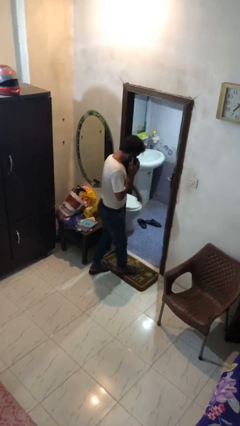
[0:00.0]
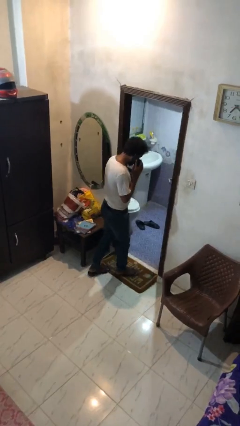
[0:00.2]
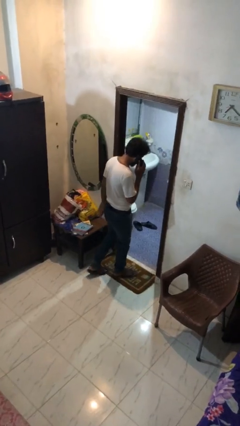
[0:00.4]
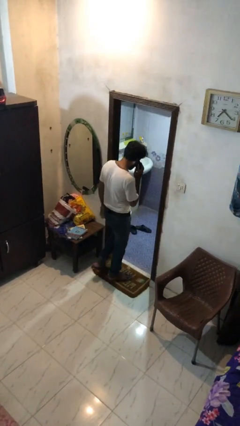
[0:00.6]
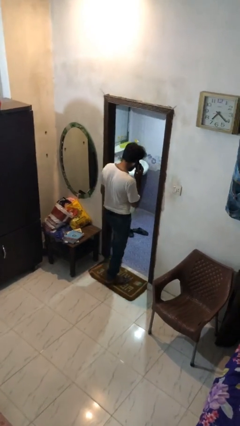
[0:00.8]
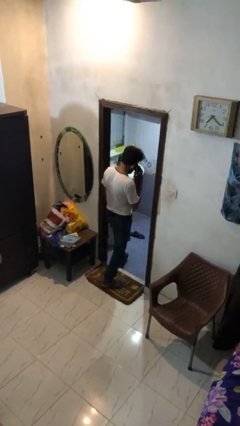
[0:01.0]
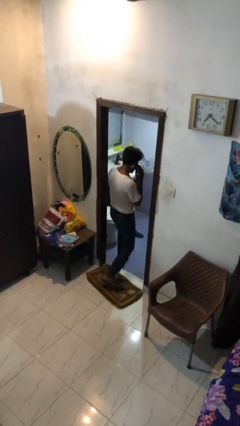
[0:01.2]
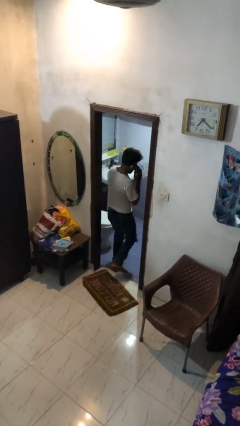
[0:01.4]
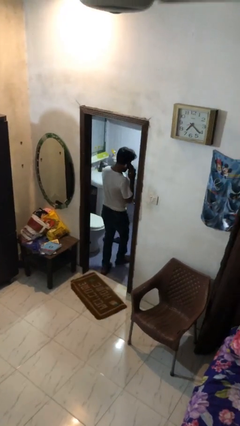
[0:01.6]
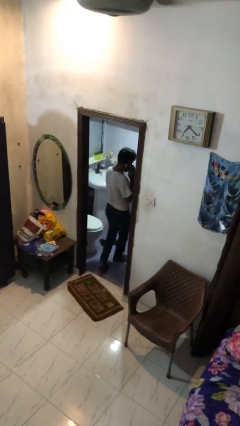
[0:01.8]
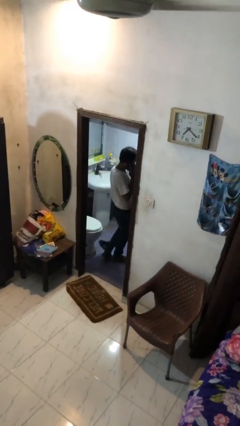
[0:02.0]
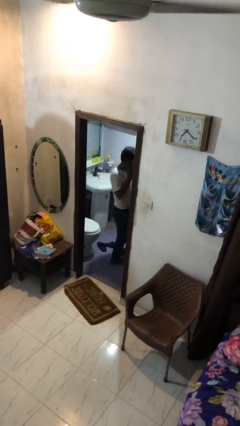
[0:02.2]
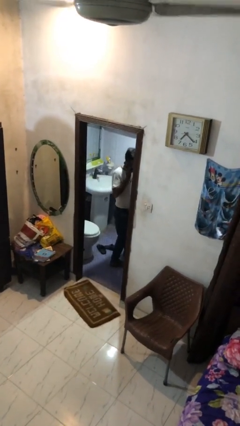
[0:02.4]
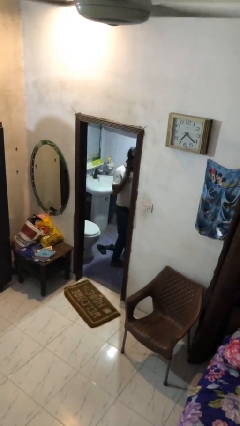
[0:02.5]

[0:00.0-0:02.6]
person exits scene through structure

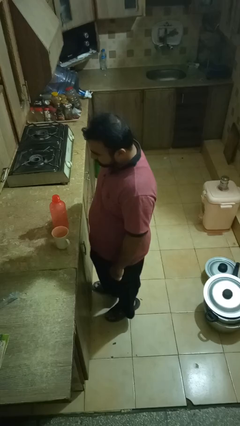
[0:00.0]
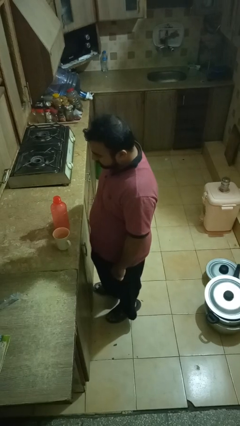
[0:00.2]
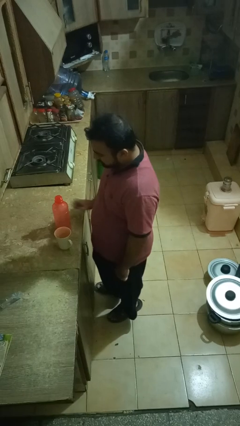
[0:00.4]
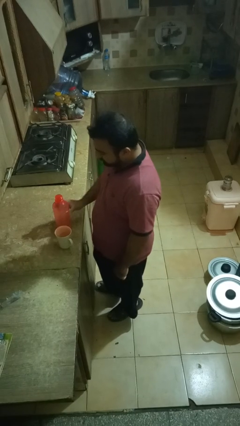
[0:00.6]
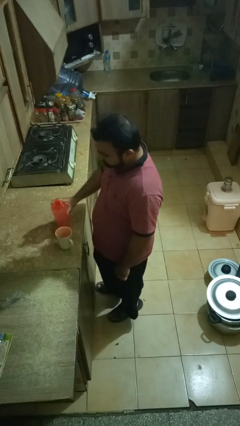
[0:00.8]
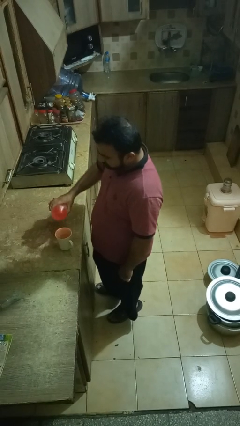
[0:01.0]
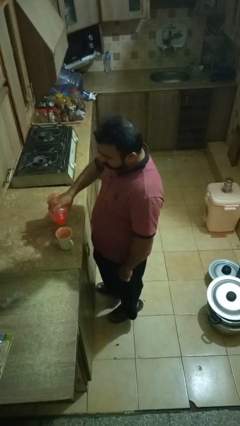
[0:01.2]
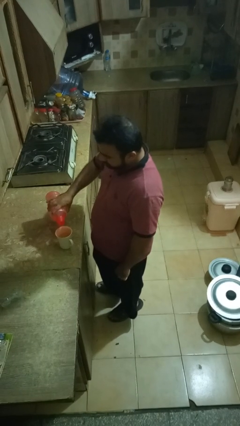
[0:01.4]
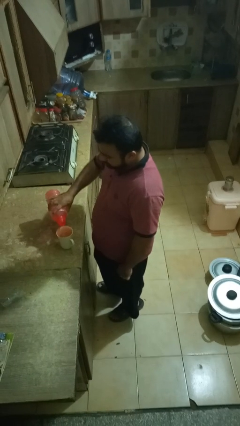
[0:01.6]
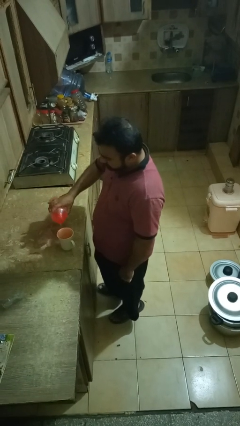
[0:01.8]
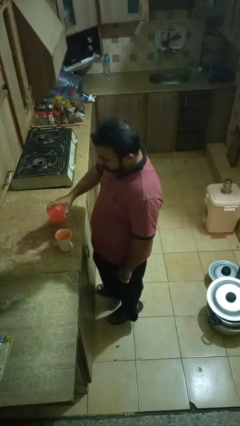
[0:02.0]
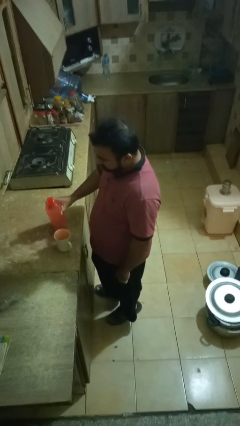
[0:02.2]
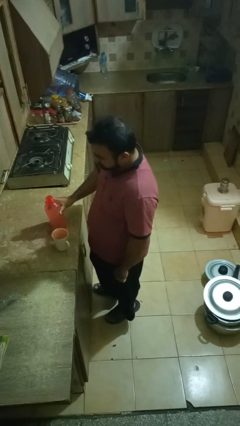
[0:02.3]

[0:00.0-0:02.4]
person pours liquid into cup

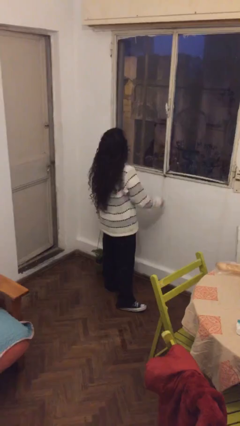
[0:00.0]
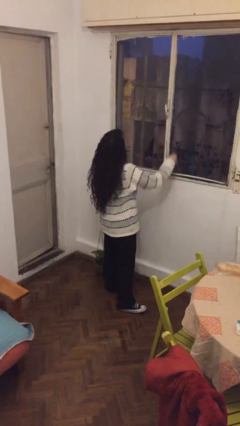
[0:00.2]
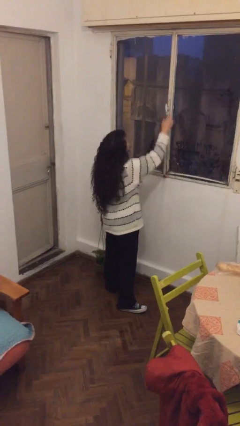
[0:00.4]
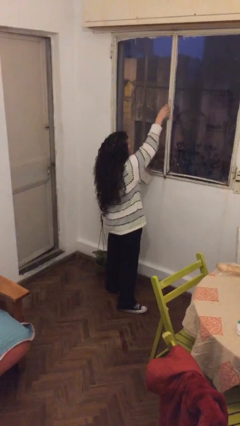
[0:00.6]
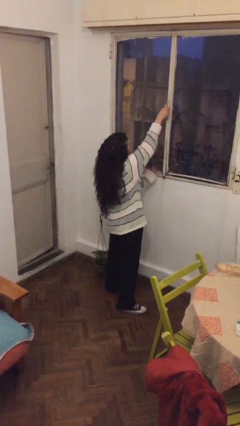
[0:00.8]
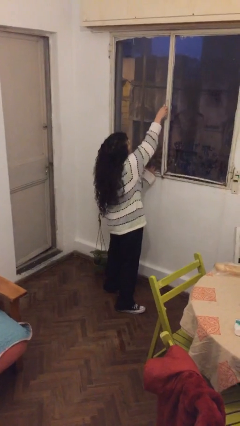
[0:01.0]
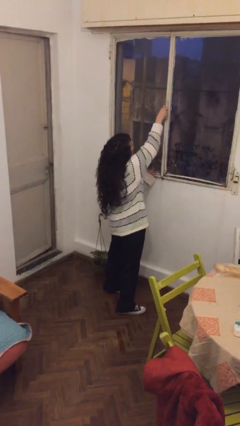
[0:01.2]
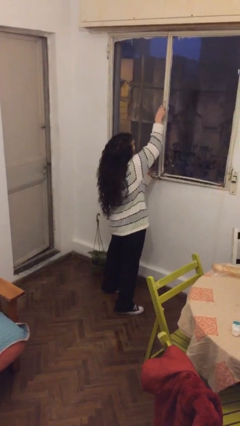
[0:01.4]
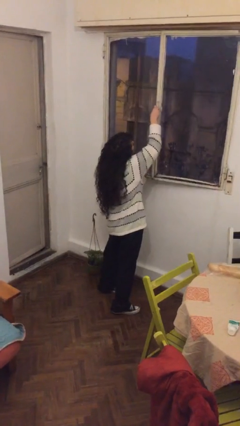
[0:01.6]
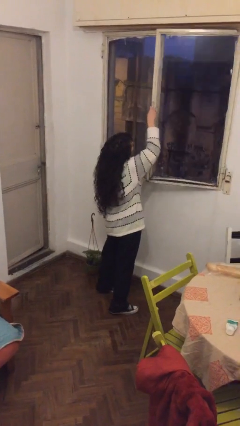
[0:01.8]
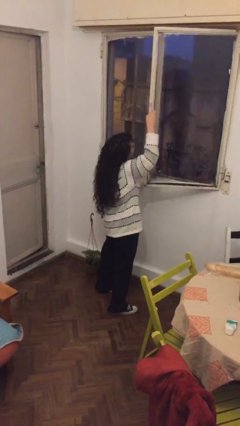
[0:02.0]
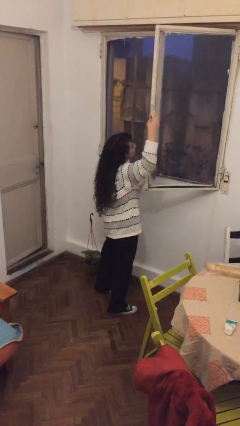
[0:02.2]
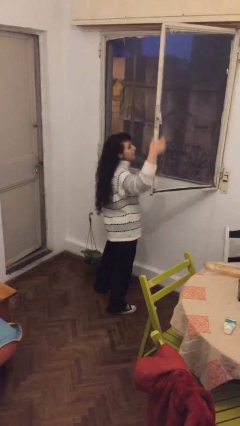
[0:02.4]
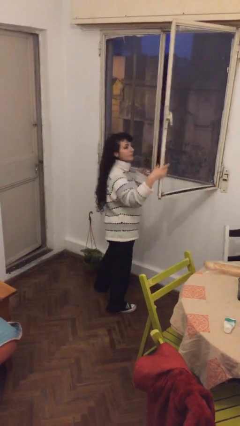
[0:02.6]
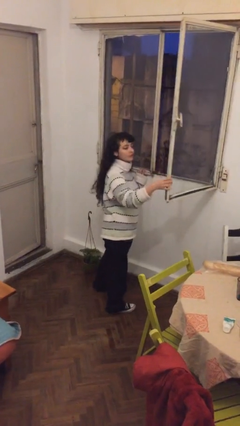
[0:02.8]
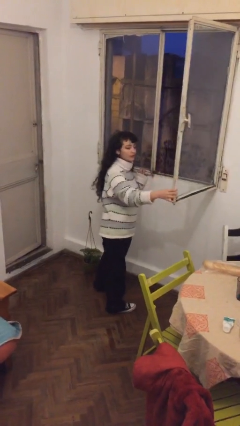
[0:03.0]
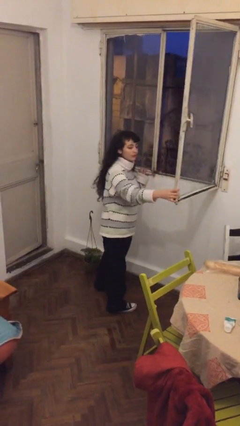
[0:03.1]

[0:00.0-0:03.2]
person opens home window

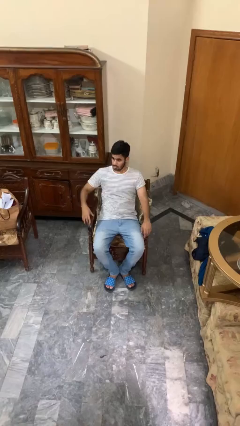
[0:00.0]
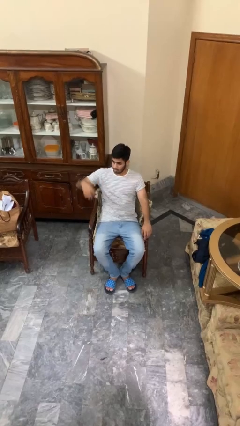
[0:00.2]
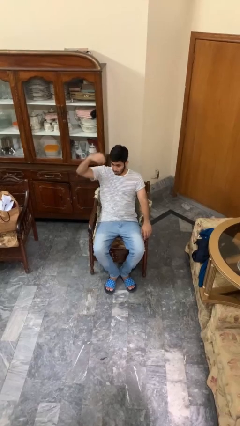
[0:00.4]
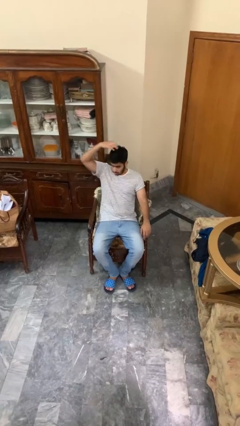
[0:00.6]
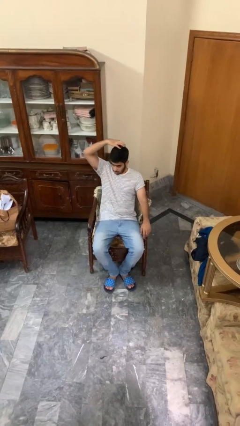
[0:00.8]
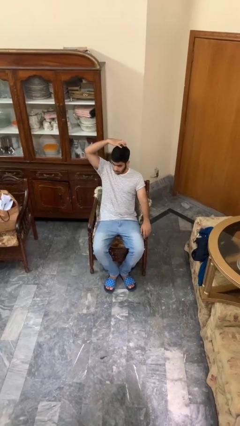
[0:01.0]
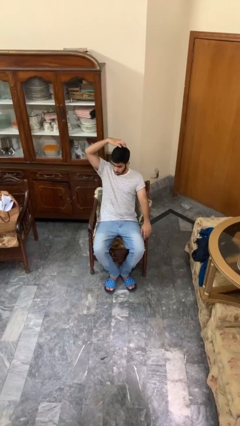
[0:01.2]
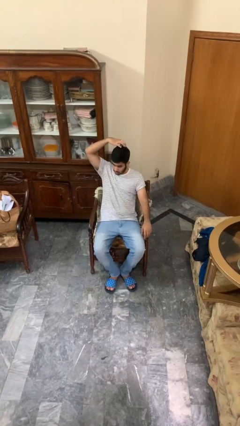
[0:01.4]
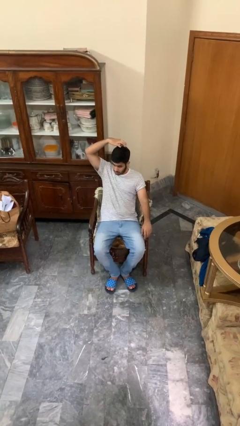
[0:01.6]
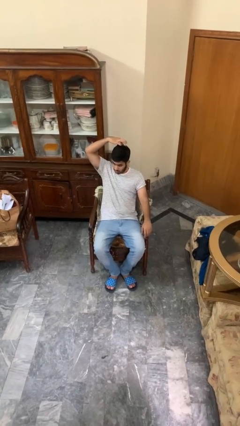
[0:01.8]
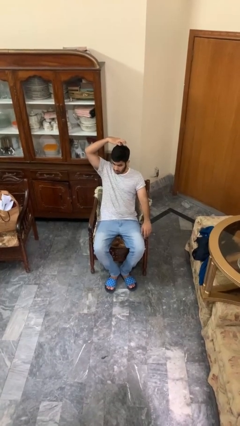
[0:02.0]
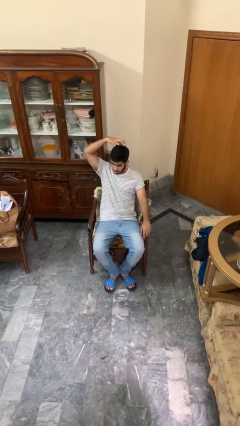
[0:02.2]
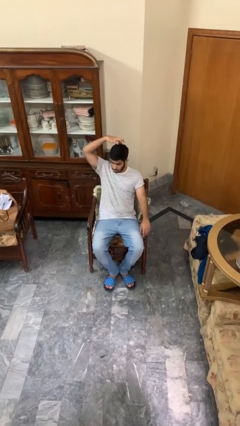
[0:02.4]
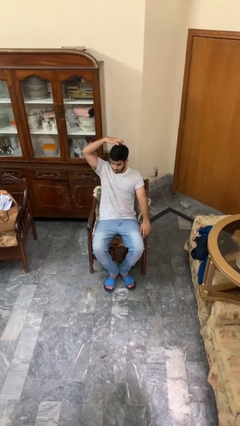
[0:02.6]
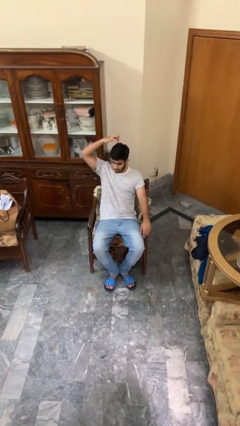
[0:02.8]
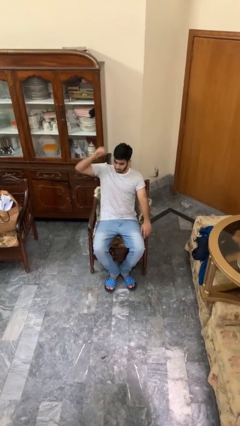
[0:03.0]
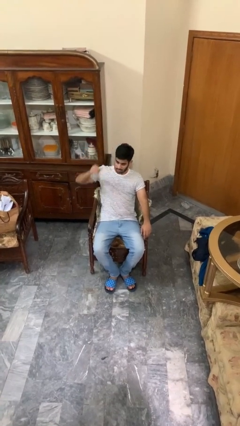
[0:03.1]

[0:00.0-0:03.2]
person strokes hair

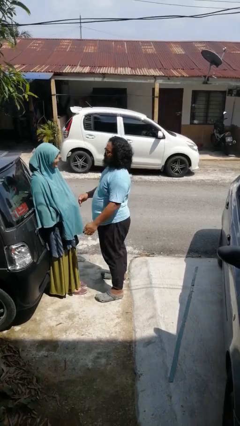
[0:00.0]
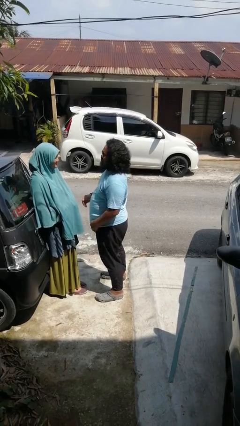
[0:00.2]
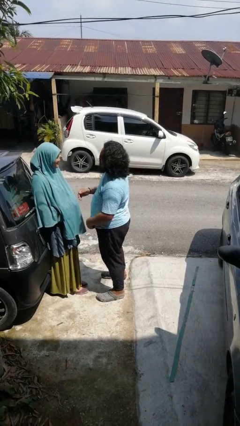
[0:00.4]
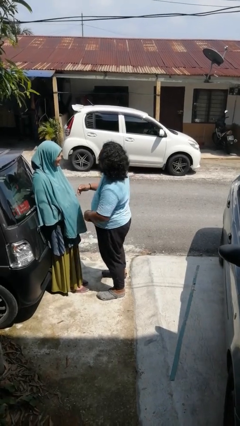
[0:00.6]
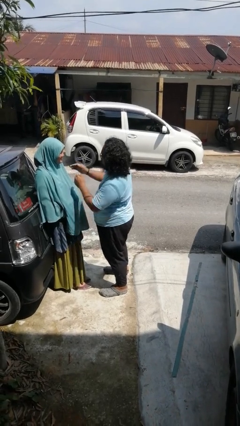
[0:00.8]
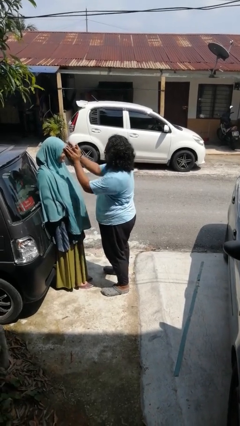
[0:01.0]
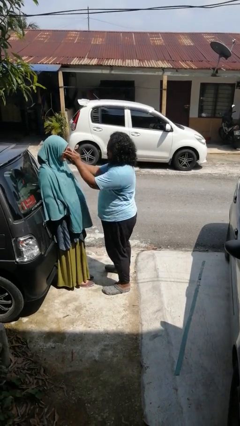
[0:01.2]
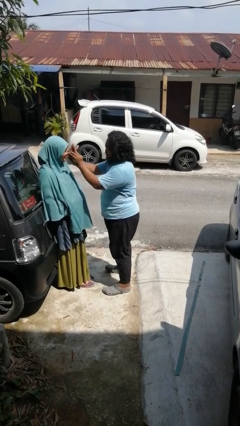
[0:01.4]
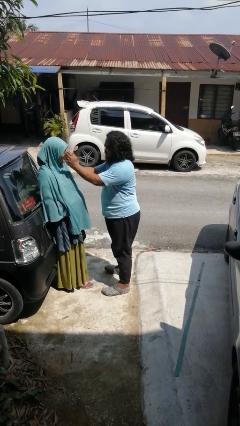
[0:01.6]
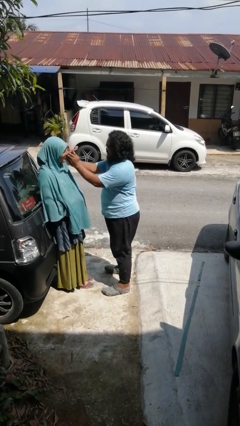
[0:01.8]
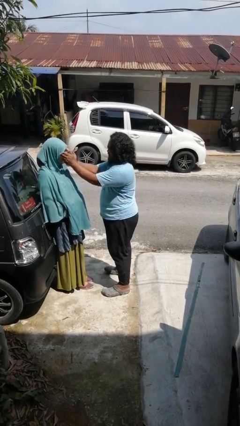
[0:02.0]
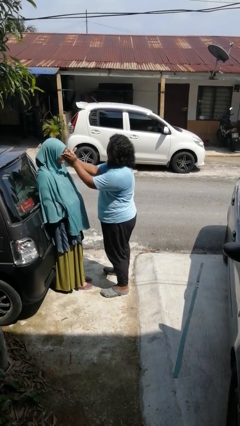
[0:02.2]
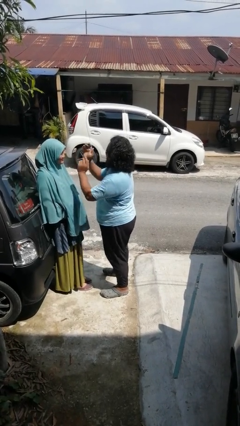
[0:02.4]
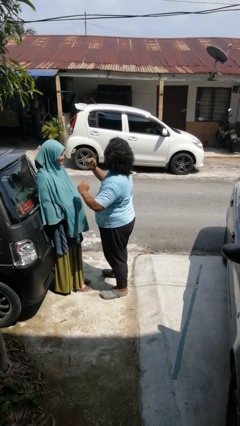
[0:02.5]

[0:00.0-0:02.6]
person touches face of person

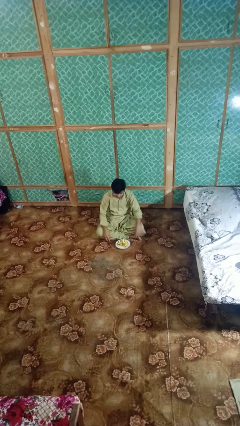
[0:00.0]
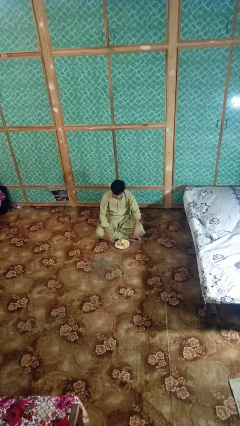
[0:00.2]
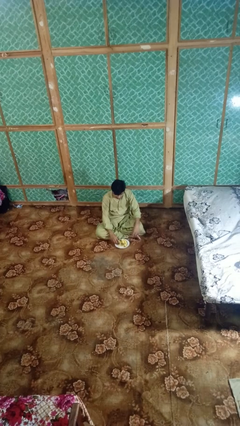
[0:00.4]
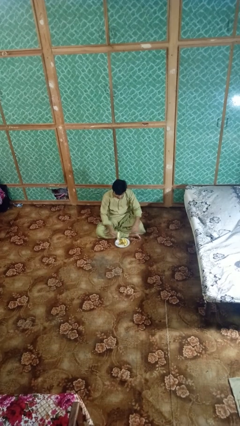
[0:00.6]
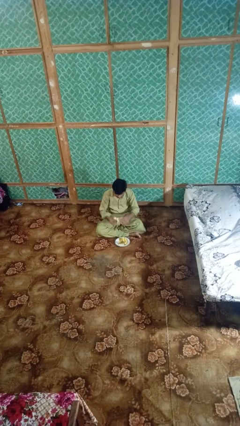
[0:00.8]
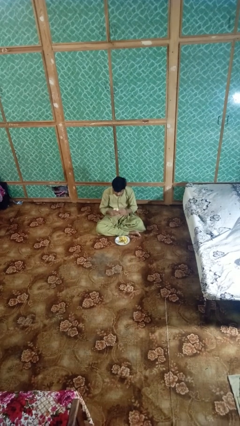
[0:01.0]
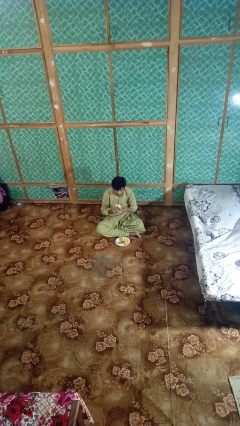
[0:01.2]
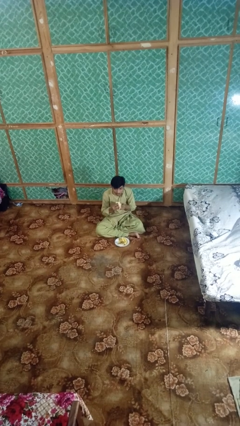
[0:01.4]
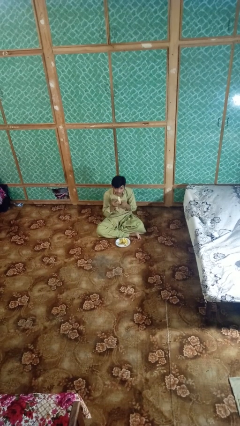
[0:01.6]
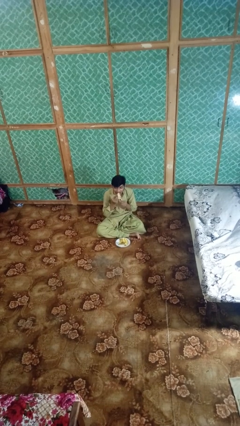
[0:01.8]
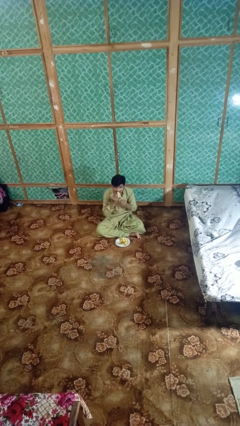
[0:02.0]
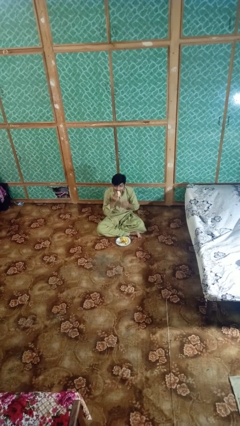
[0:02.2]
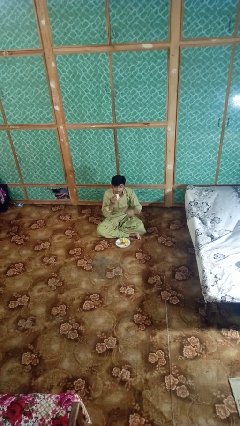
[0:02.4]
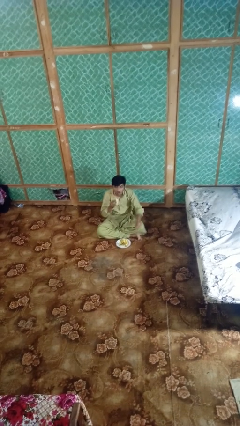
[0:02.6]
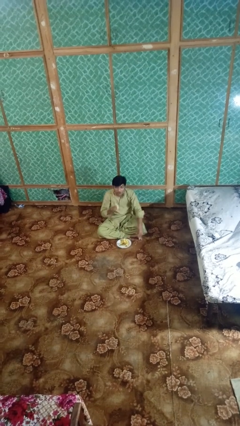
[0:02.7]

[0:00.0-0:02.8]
person eats banana
